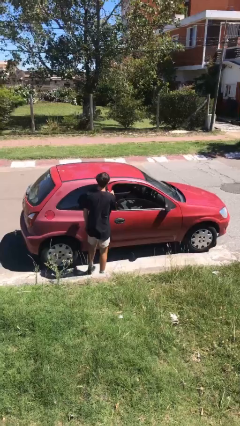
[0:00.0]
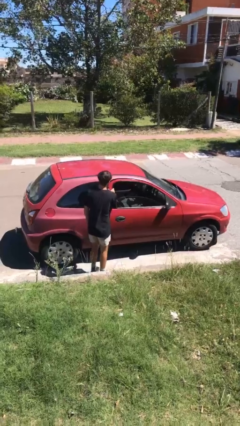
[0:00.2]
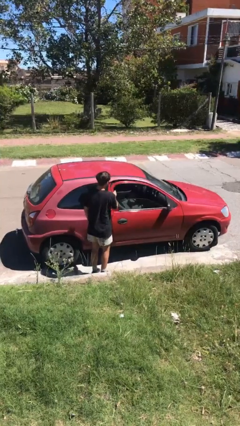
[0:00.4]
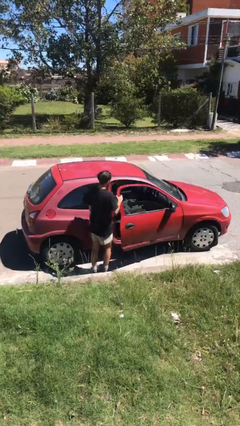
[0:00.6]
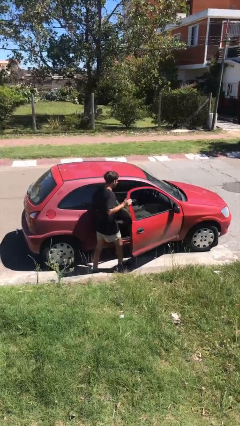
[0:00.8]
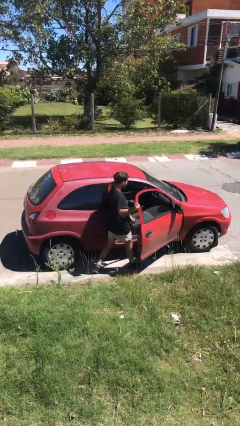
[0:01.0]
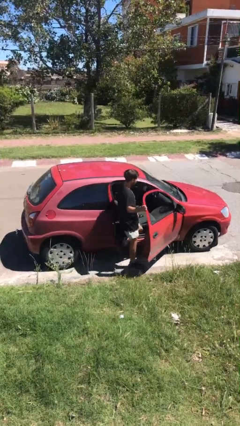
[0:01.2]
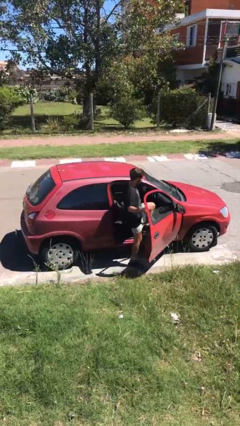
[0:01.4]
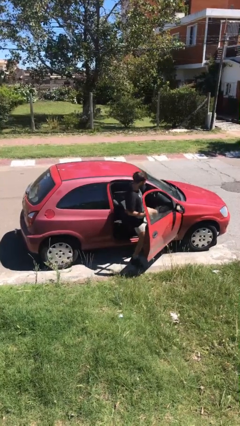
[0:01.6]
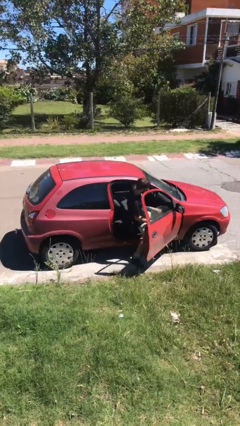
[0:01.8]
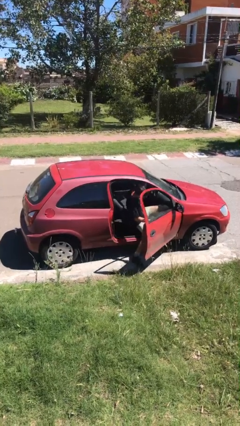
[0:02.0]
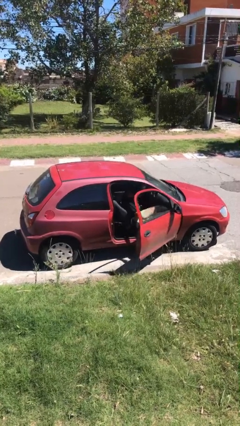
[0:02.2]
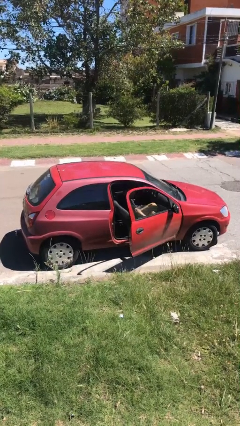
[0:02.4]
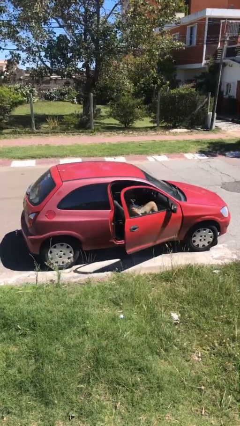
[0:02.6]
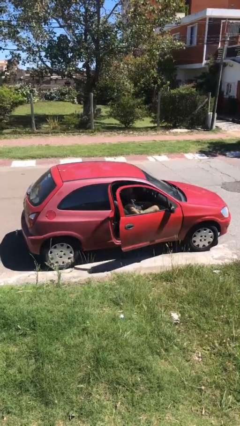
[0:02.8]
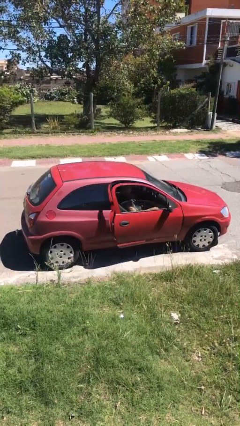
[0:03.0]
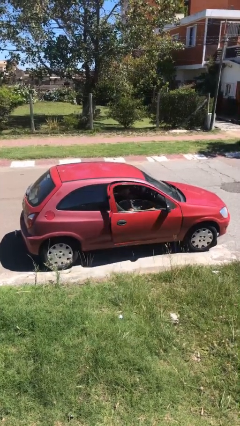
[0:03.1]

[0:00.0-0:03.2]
car picks up person

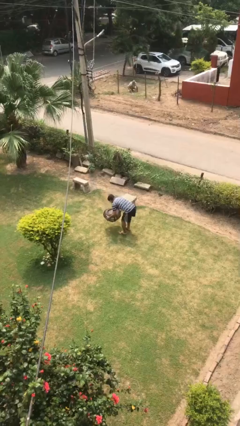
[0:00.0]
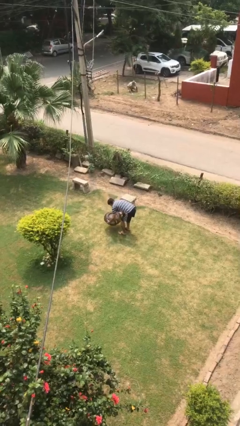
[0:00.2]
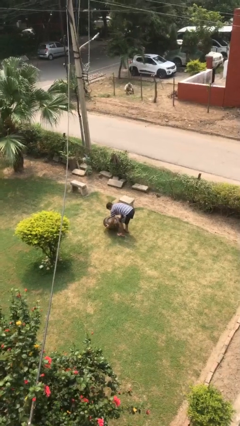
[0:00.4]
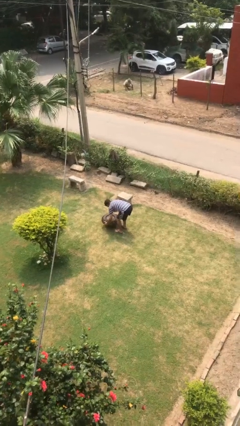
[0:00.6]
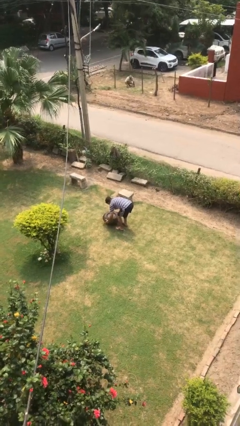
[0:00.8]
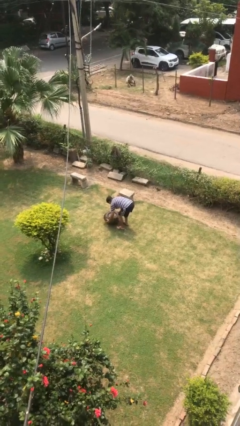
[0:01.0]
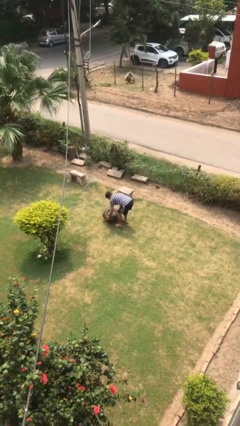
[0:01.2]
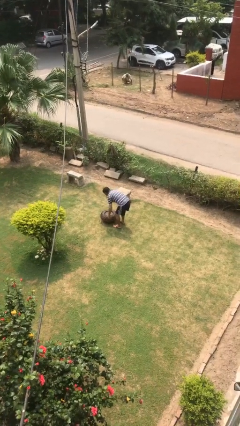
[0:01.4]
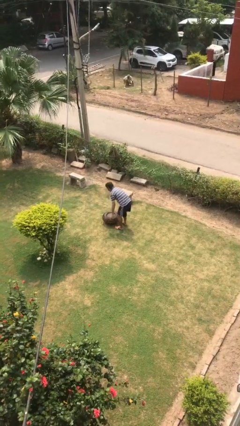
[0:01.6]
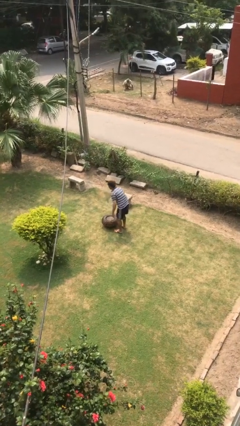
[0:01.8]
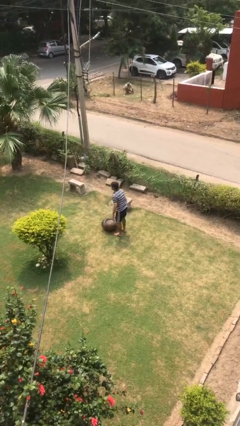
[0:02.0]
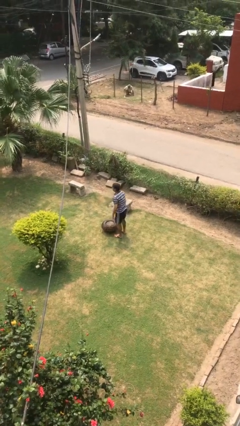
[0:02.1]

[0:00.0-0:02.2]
person puts down object on floor

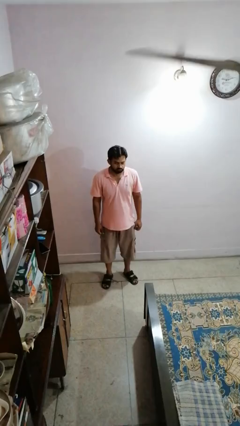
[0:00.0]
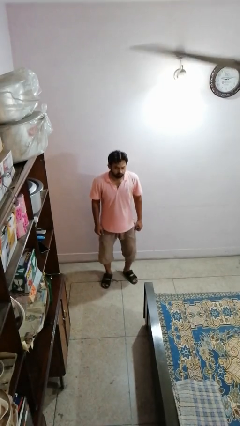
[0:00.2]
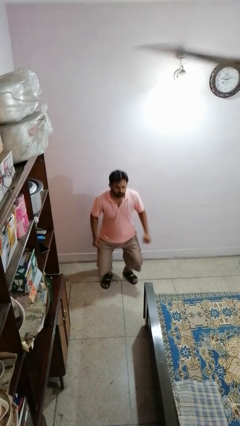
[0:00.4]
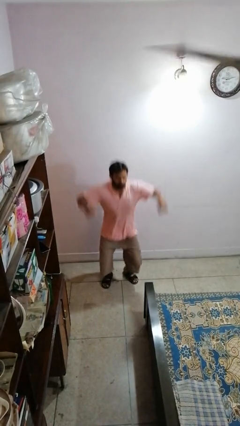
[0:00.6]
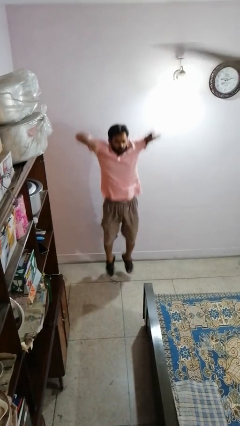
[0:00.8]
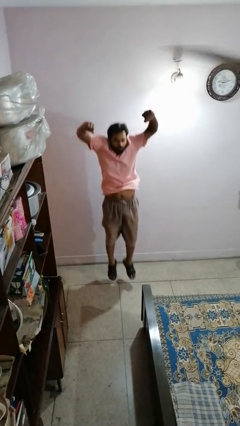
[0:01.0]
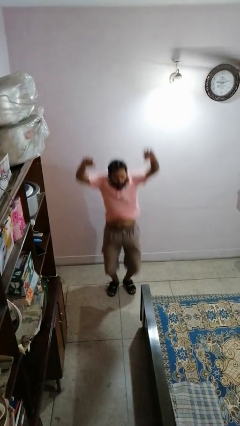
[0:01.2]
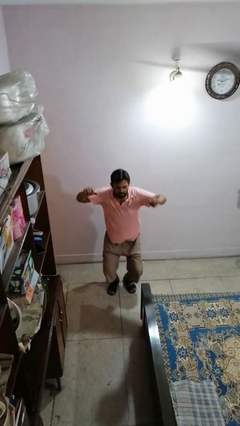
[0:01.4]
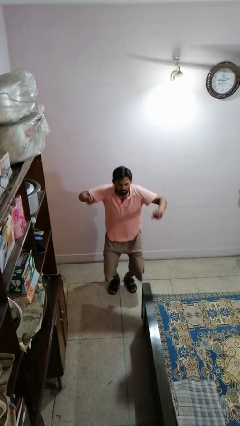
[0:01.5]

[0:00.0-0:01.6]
person jumps

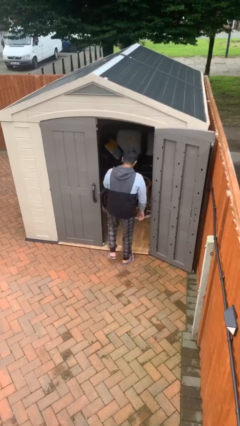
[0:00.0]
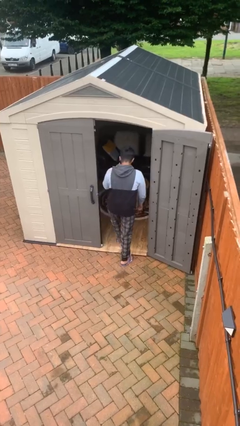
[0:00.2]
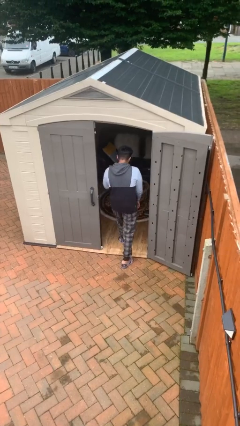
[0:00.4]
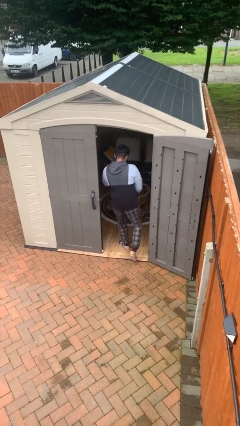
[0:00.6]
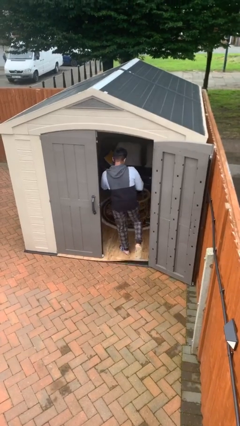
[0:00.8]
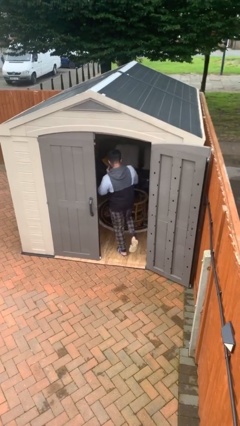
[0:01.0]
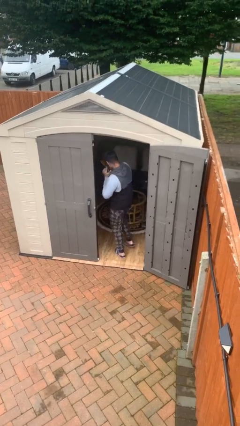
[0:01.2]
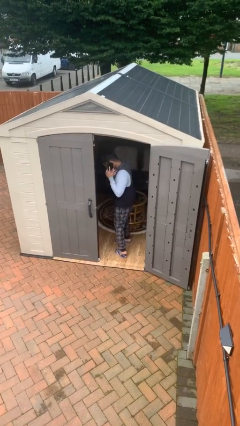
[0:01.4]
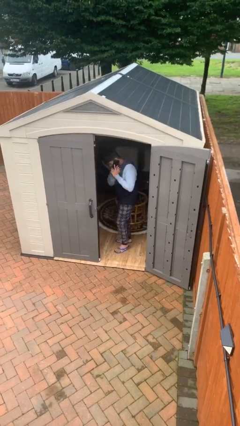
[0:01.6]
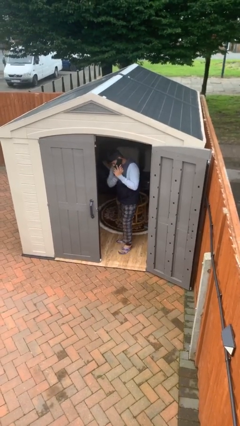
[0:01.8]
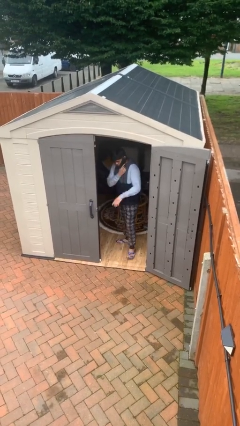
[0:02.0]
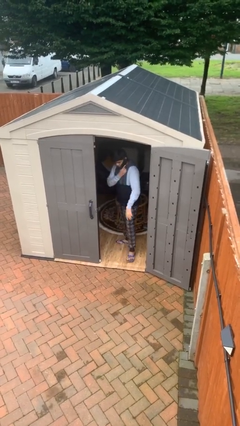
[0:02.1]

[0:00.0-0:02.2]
person exits scene through structure

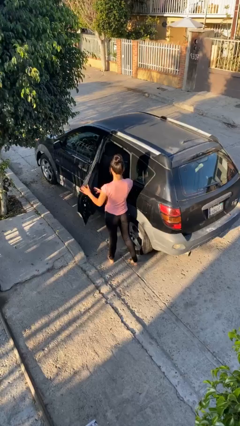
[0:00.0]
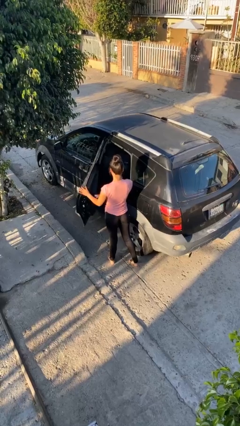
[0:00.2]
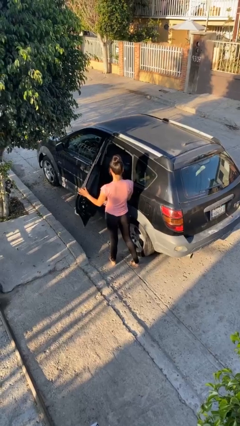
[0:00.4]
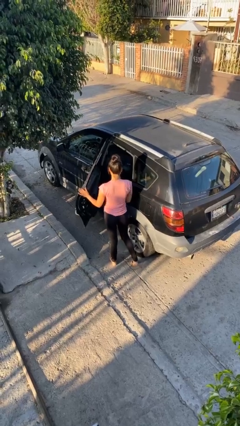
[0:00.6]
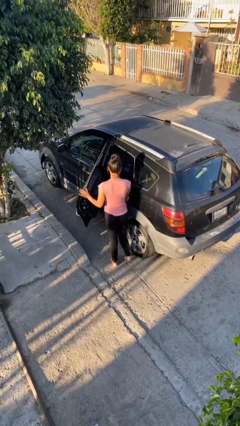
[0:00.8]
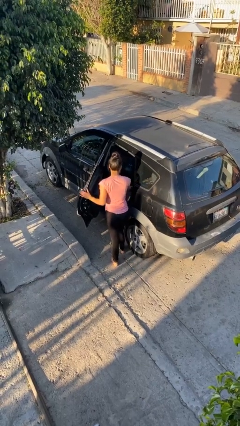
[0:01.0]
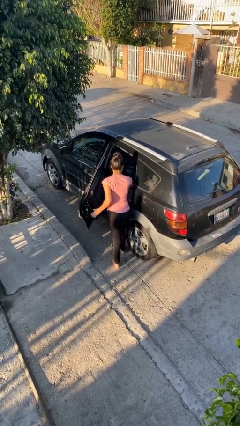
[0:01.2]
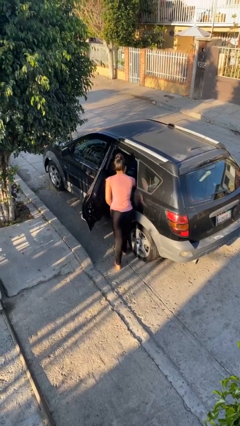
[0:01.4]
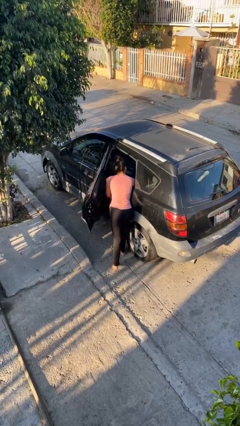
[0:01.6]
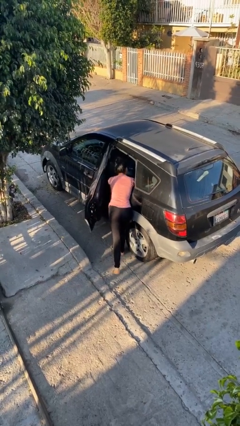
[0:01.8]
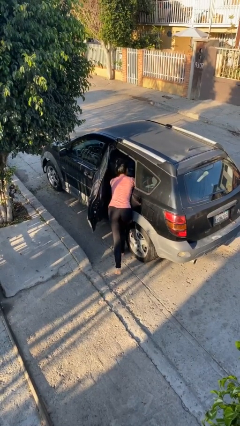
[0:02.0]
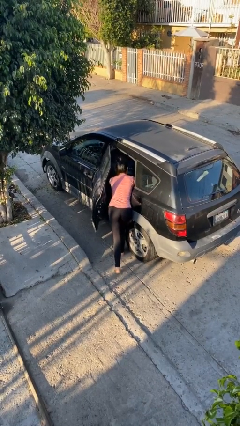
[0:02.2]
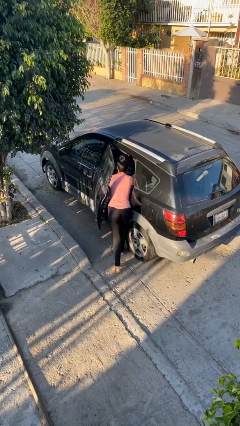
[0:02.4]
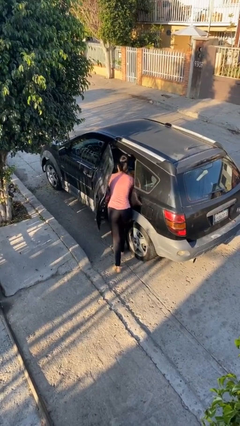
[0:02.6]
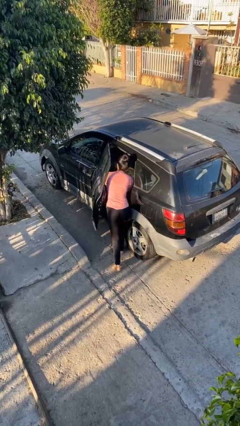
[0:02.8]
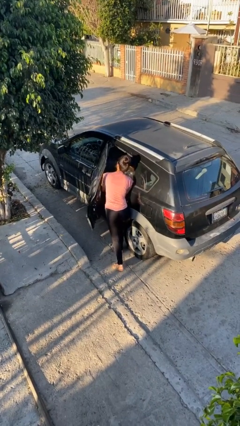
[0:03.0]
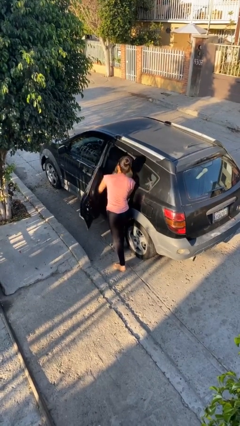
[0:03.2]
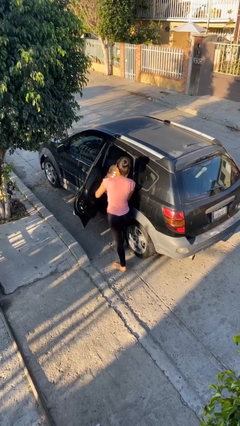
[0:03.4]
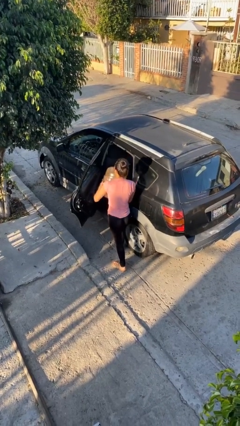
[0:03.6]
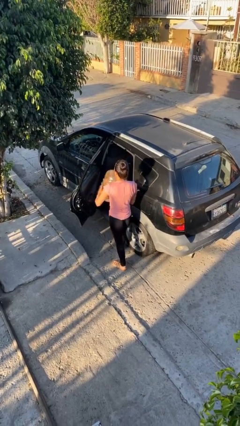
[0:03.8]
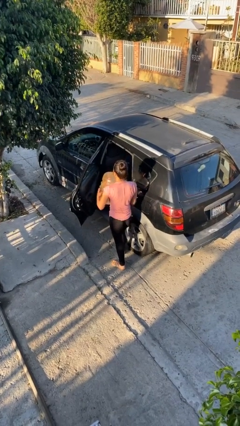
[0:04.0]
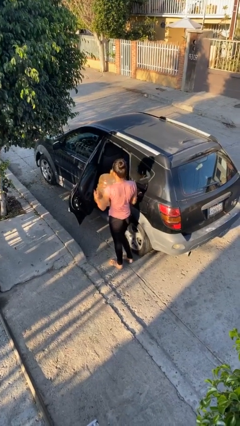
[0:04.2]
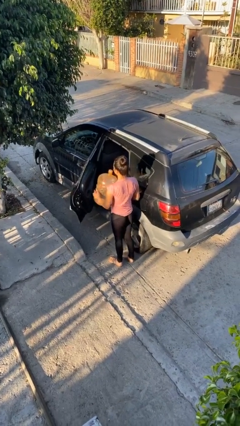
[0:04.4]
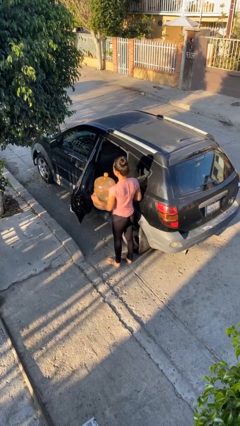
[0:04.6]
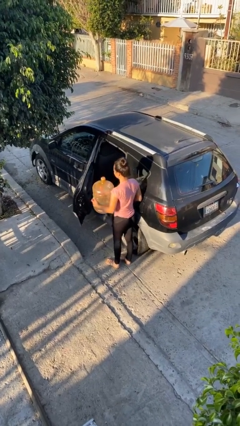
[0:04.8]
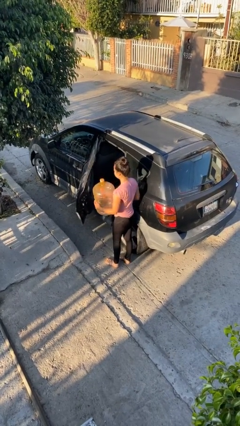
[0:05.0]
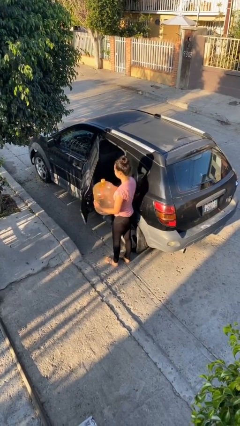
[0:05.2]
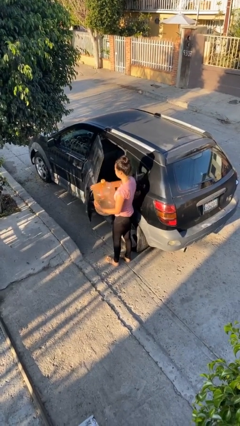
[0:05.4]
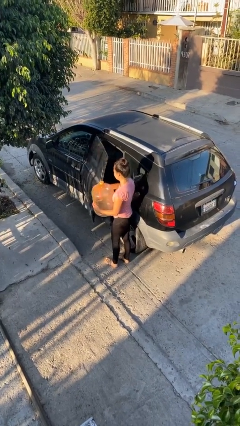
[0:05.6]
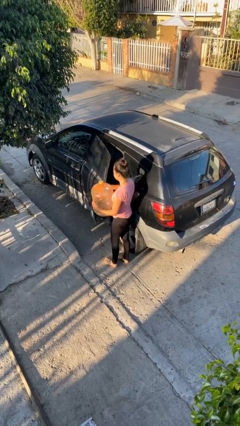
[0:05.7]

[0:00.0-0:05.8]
person unloads car

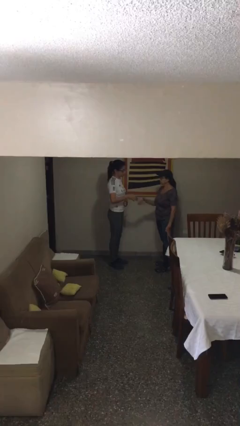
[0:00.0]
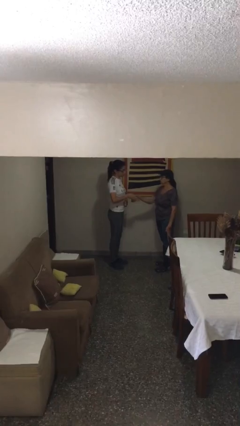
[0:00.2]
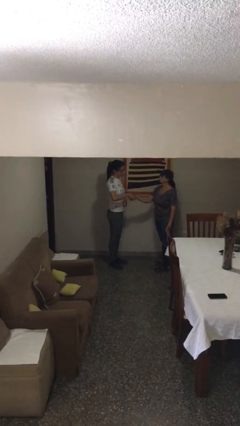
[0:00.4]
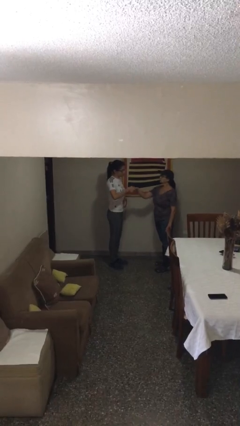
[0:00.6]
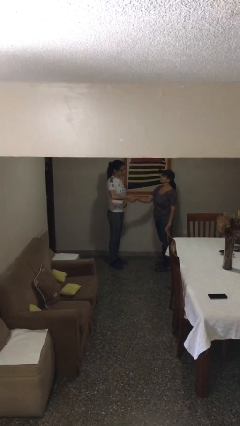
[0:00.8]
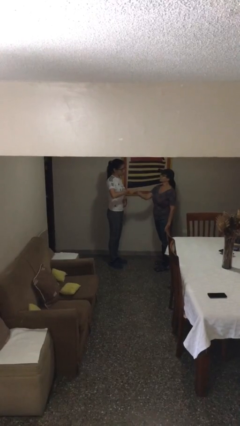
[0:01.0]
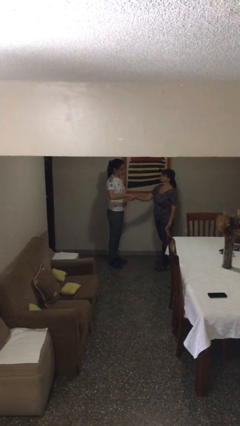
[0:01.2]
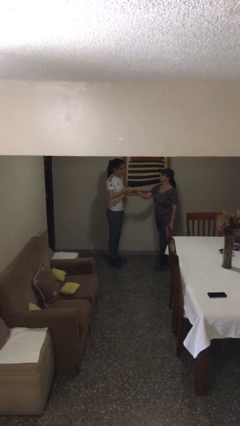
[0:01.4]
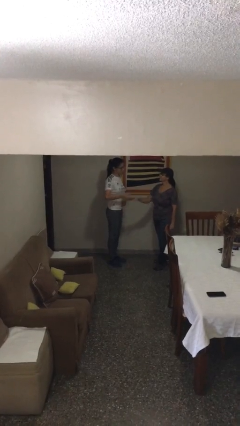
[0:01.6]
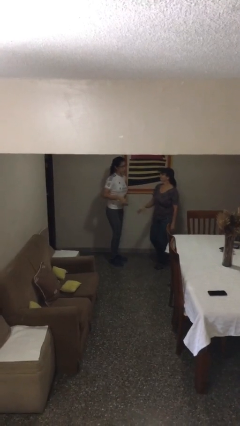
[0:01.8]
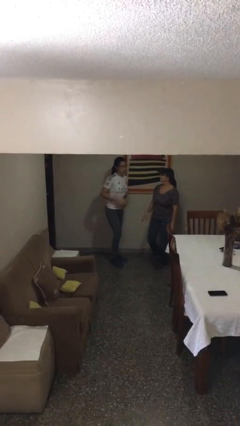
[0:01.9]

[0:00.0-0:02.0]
person shakes hand
